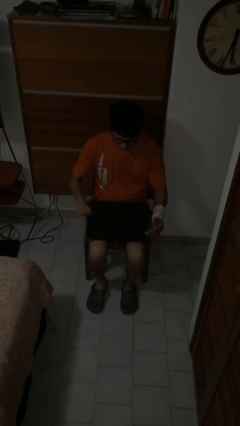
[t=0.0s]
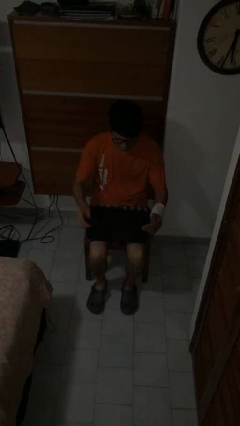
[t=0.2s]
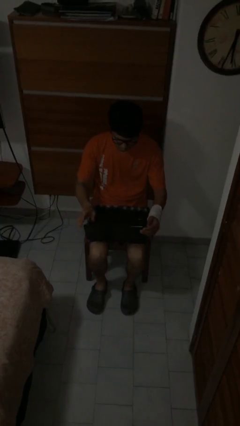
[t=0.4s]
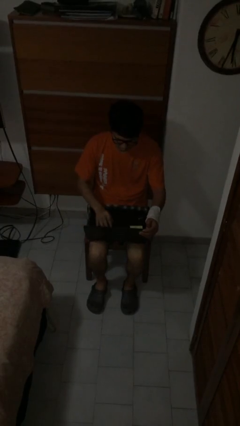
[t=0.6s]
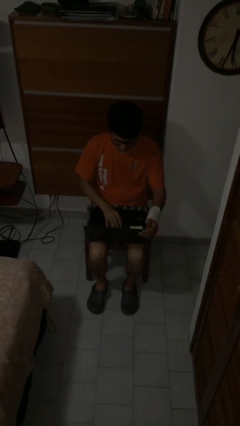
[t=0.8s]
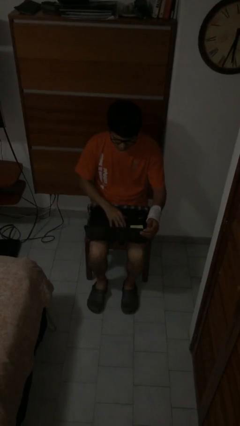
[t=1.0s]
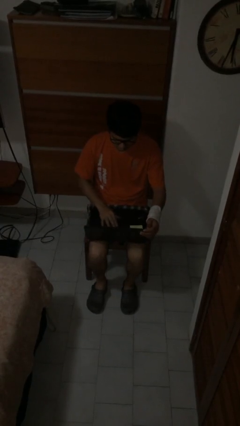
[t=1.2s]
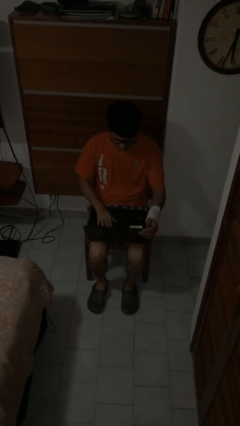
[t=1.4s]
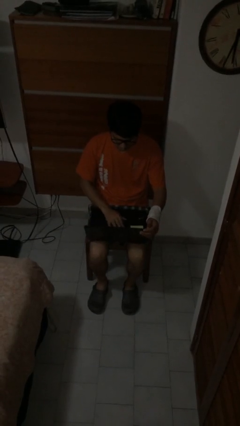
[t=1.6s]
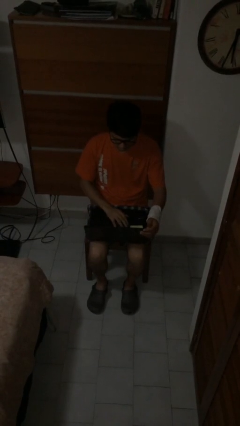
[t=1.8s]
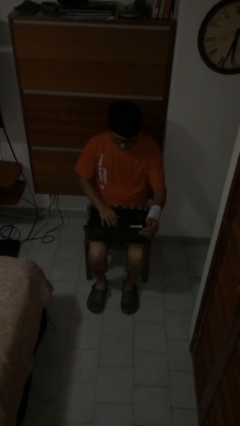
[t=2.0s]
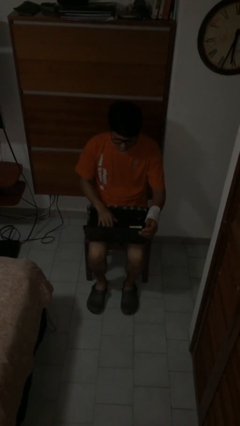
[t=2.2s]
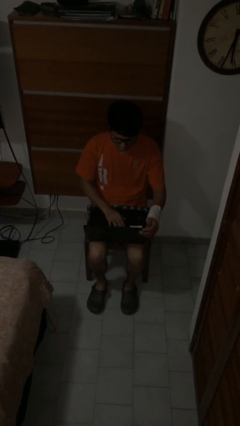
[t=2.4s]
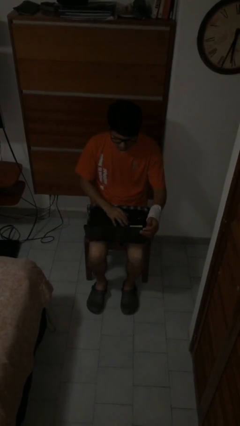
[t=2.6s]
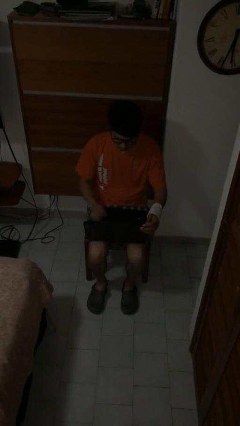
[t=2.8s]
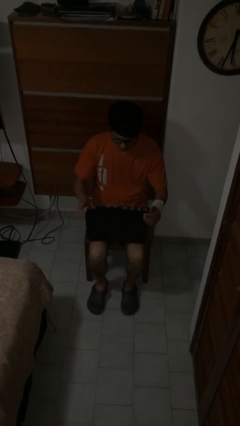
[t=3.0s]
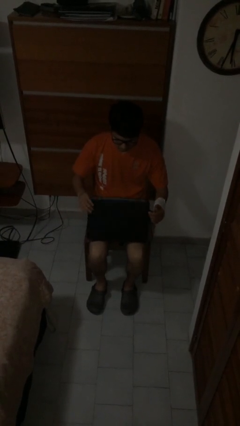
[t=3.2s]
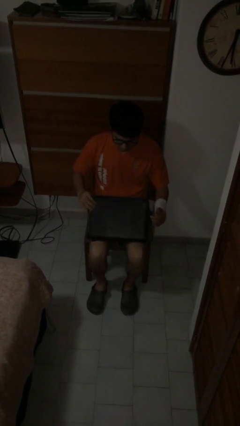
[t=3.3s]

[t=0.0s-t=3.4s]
person interacts with laptop

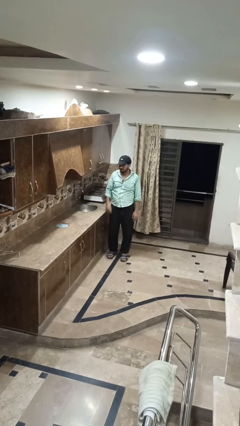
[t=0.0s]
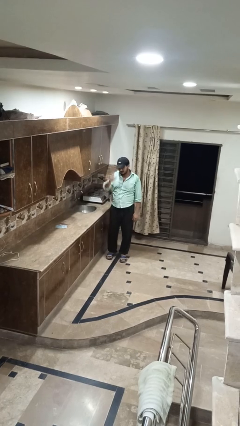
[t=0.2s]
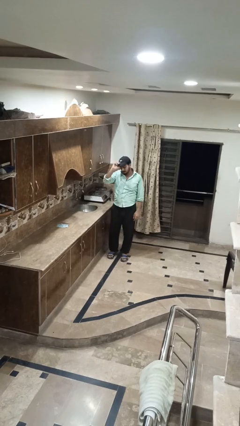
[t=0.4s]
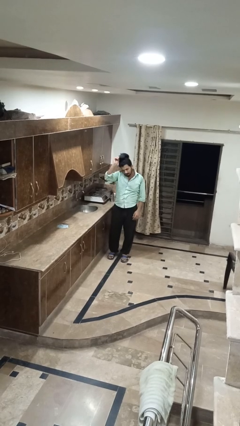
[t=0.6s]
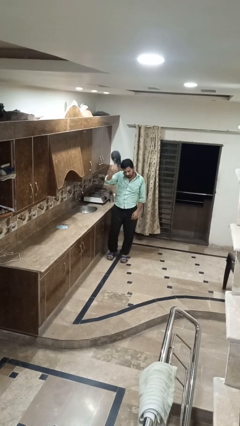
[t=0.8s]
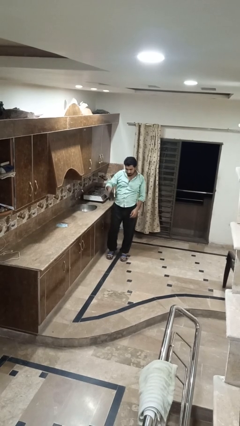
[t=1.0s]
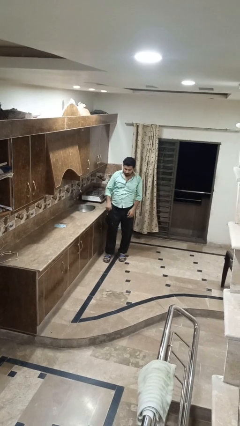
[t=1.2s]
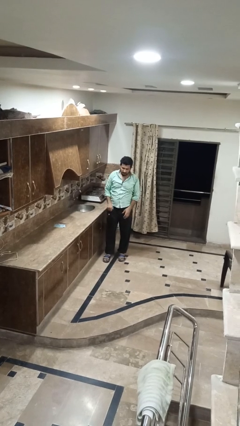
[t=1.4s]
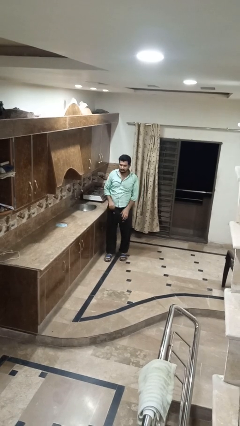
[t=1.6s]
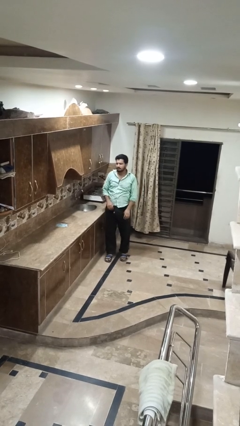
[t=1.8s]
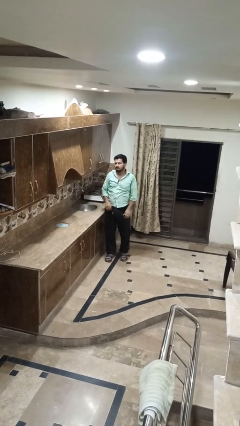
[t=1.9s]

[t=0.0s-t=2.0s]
person takes off hat

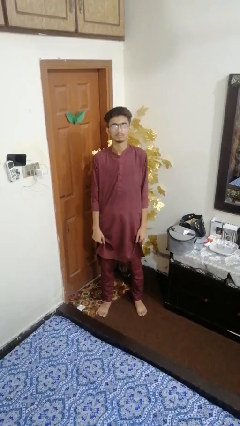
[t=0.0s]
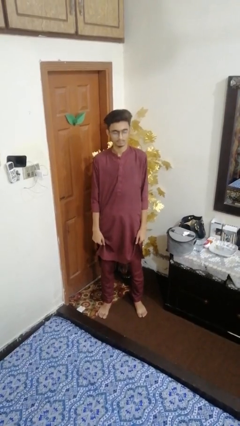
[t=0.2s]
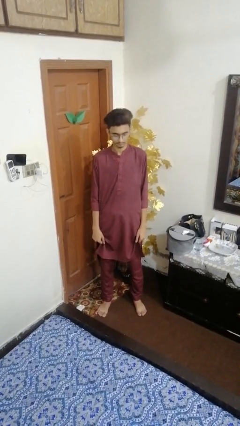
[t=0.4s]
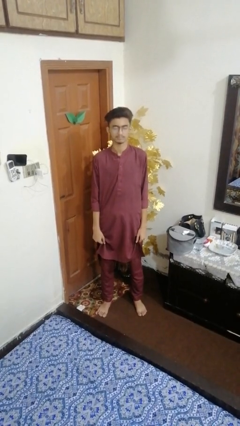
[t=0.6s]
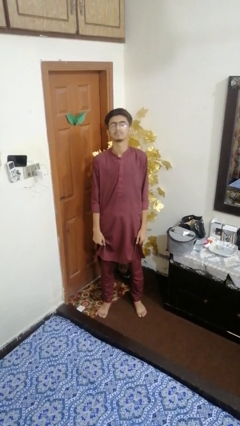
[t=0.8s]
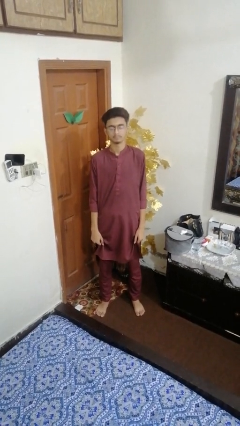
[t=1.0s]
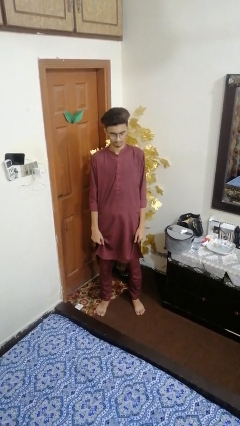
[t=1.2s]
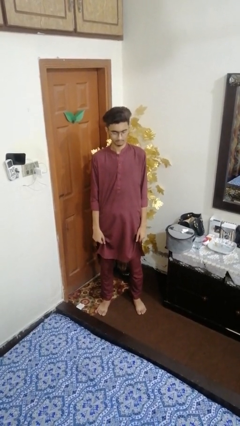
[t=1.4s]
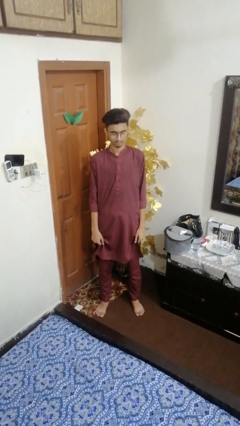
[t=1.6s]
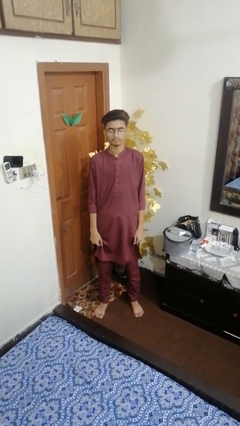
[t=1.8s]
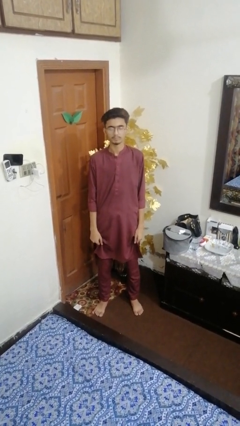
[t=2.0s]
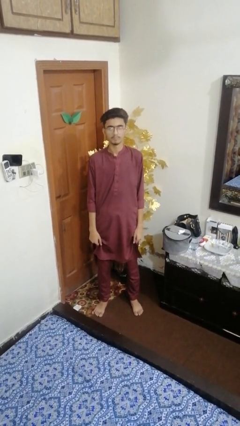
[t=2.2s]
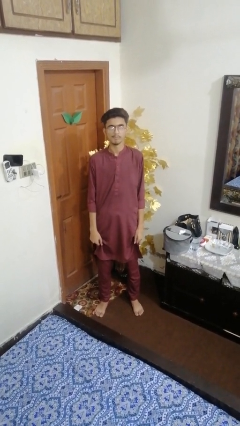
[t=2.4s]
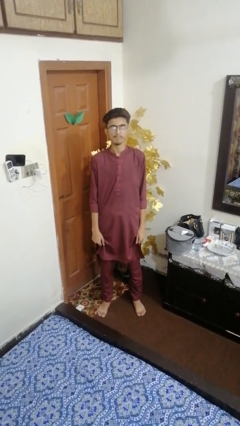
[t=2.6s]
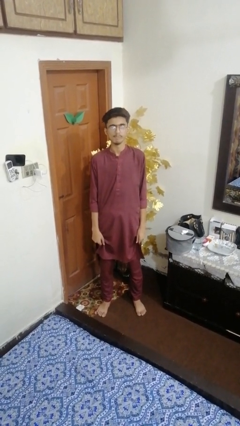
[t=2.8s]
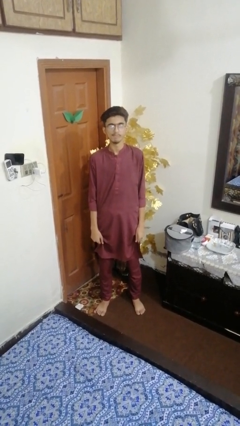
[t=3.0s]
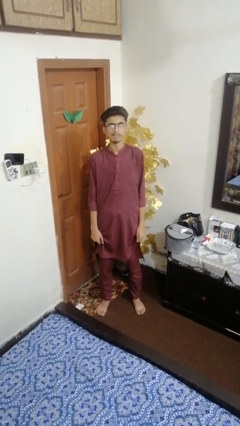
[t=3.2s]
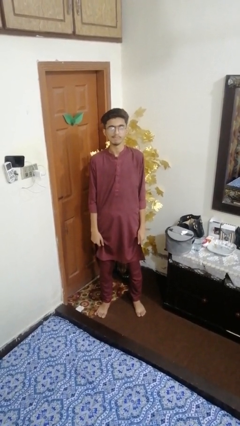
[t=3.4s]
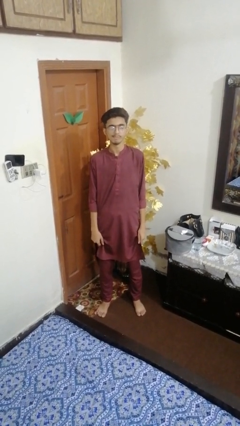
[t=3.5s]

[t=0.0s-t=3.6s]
person nods head

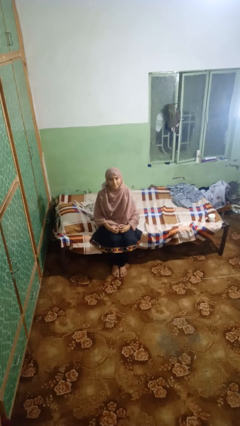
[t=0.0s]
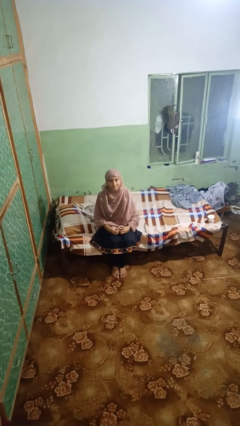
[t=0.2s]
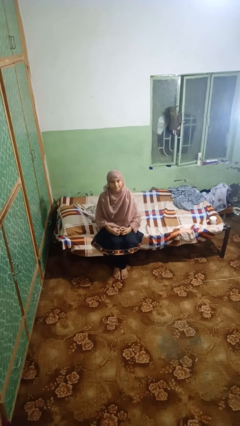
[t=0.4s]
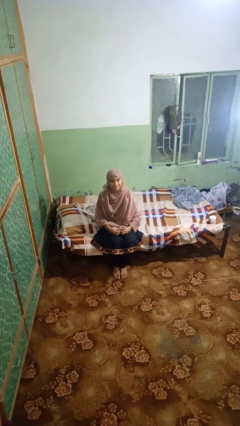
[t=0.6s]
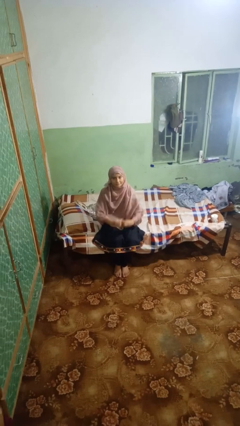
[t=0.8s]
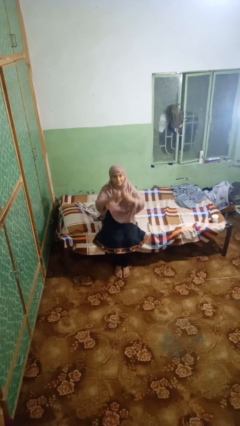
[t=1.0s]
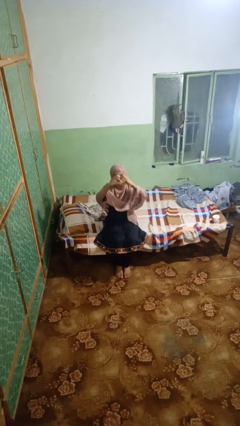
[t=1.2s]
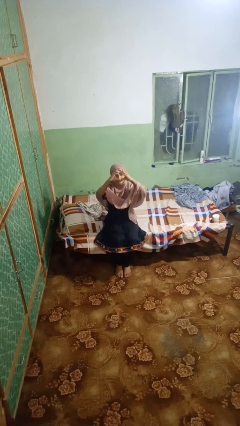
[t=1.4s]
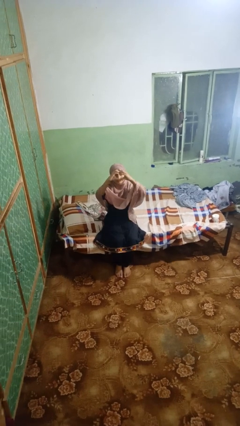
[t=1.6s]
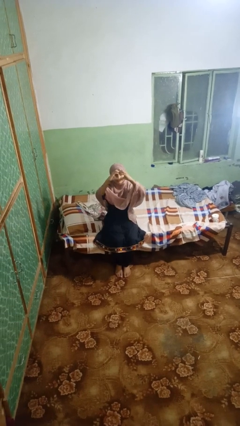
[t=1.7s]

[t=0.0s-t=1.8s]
person gestures heart

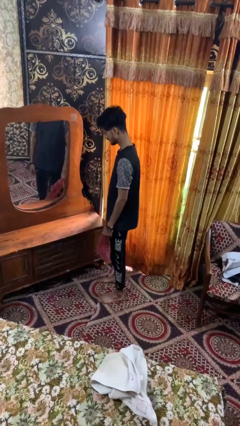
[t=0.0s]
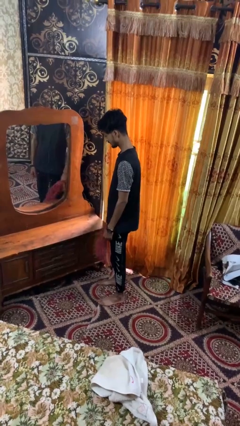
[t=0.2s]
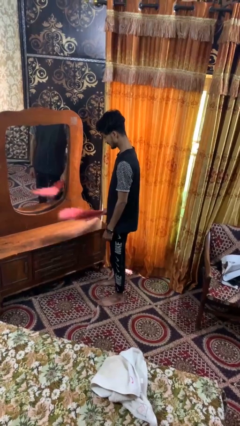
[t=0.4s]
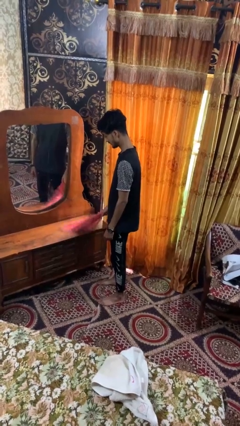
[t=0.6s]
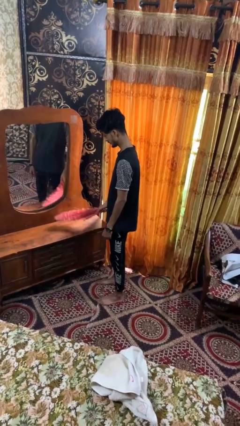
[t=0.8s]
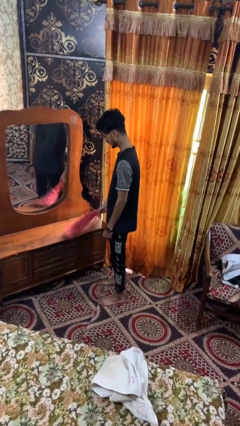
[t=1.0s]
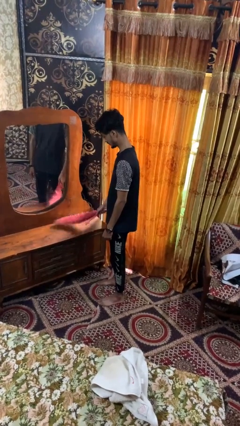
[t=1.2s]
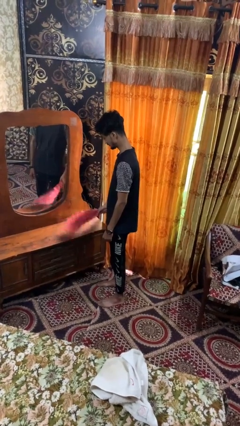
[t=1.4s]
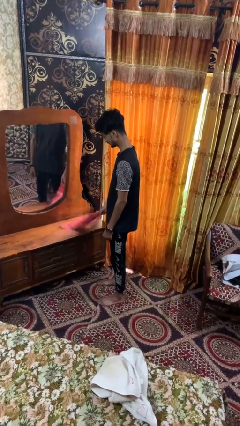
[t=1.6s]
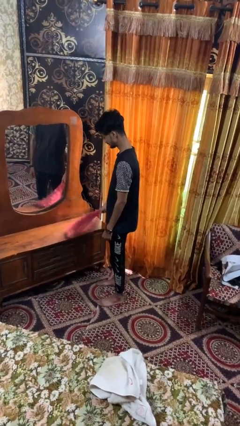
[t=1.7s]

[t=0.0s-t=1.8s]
person dusts furniture

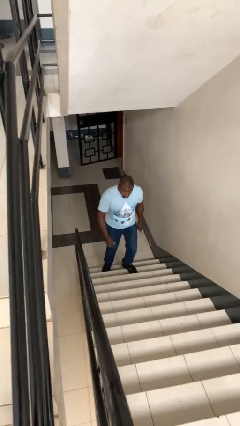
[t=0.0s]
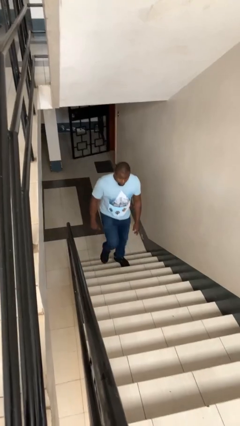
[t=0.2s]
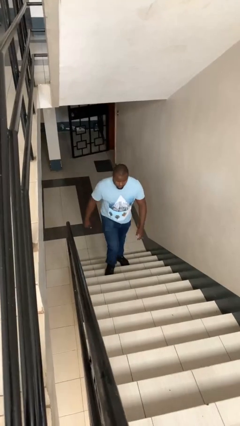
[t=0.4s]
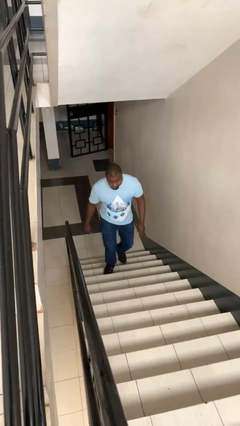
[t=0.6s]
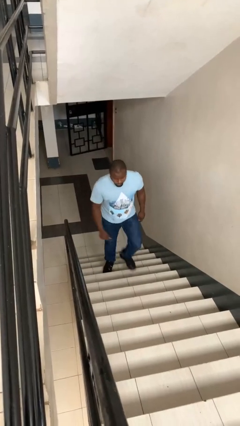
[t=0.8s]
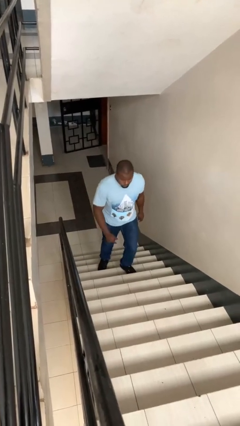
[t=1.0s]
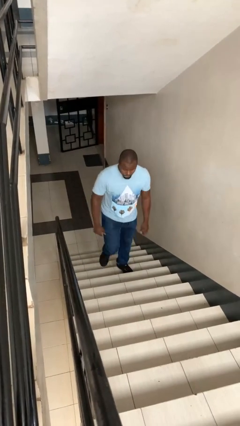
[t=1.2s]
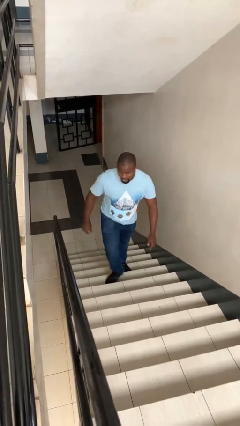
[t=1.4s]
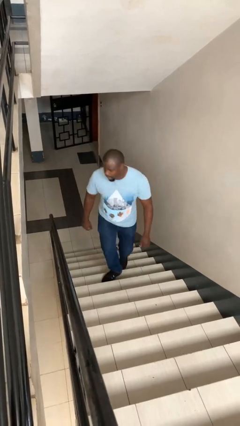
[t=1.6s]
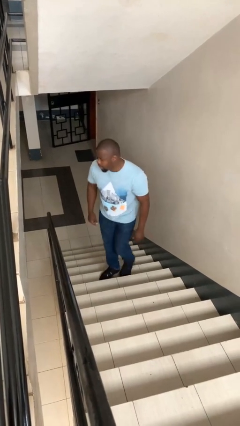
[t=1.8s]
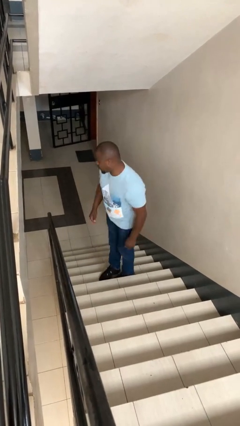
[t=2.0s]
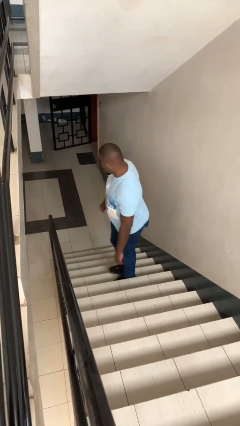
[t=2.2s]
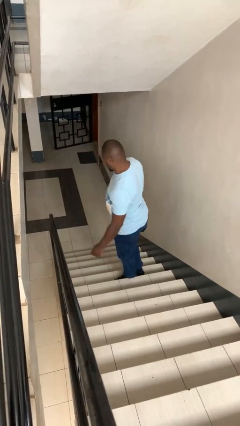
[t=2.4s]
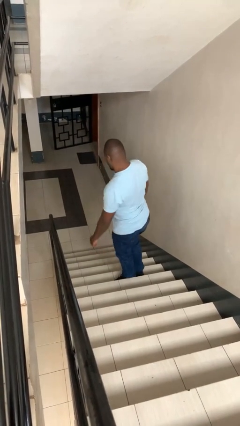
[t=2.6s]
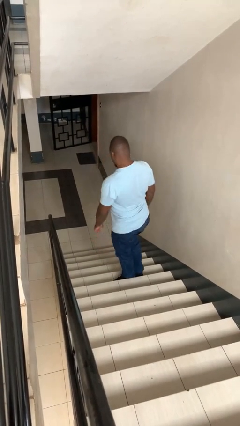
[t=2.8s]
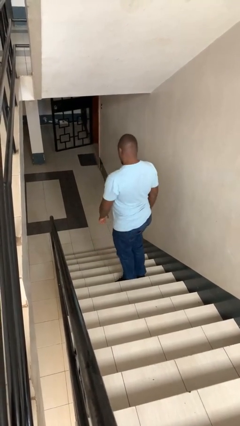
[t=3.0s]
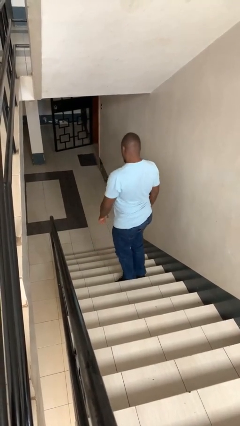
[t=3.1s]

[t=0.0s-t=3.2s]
person climbs up stairs
